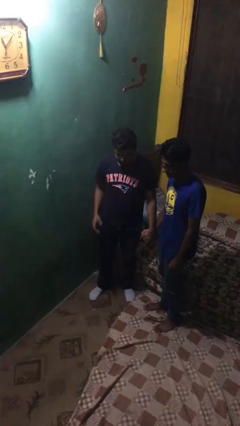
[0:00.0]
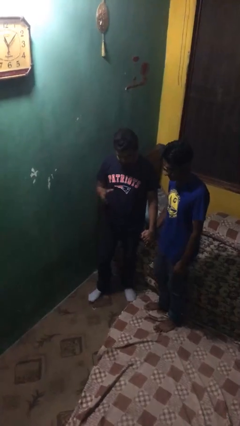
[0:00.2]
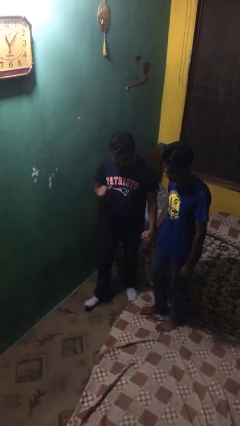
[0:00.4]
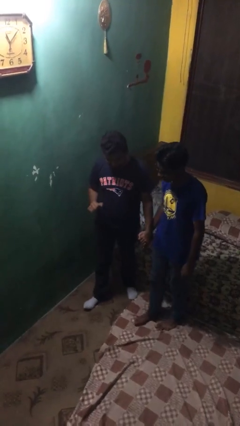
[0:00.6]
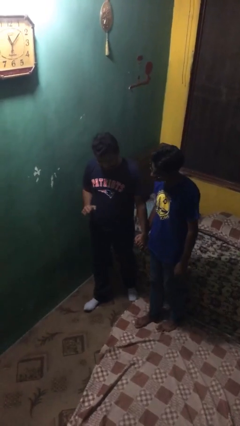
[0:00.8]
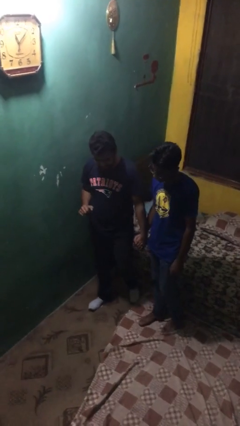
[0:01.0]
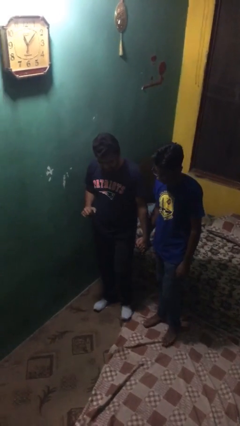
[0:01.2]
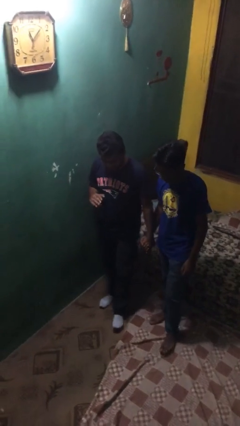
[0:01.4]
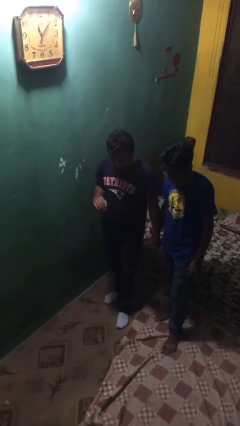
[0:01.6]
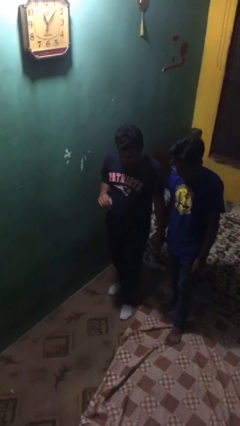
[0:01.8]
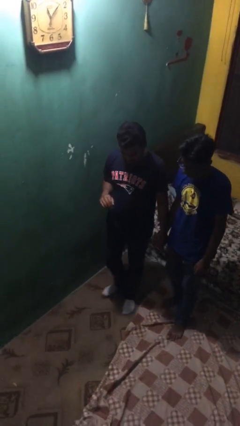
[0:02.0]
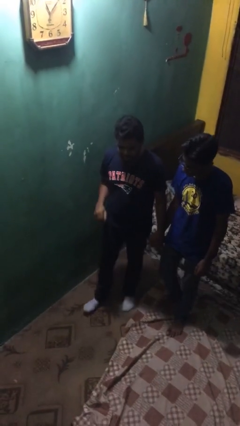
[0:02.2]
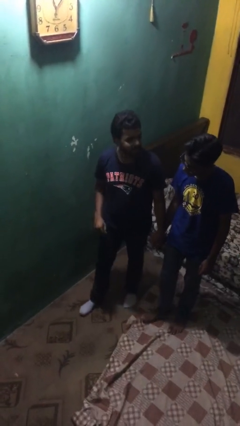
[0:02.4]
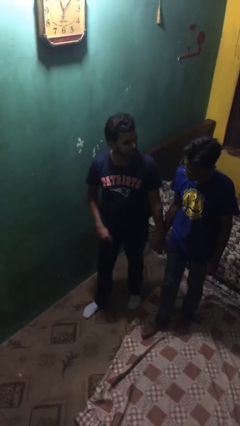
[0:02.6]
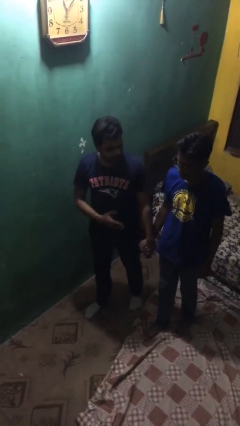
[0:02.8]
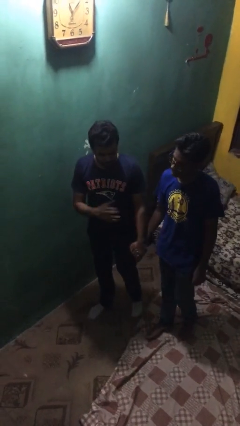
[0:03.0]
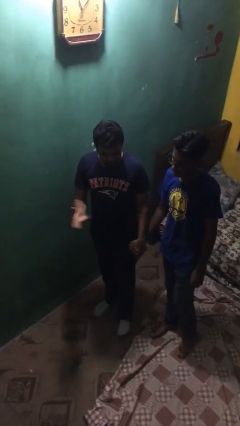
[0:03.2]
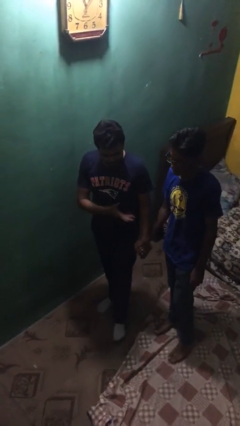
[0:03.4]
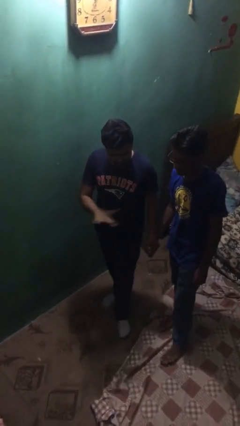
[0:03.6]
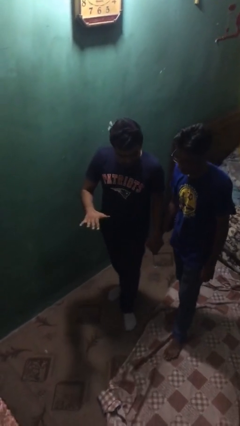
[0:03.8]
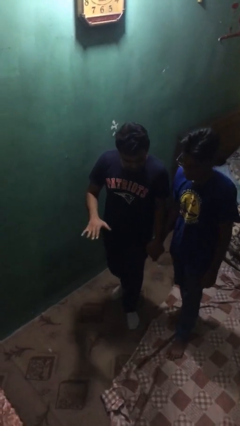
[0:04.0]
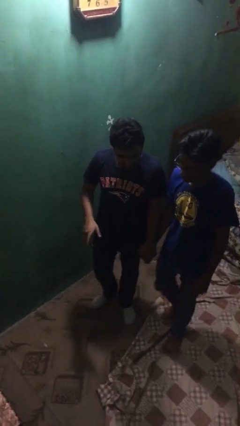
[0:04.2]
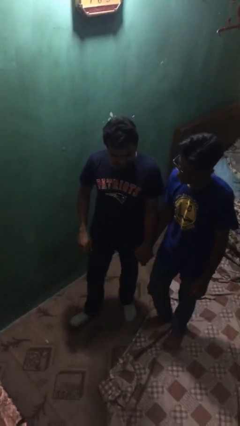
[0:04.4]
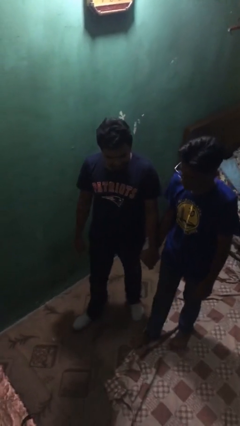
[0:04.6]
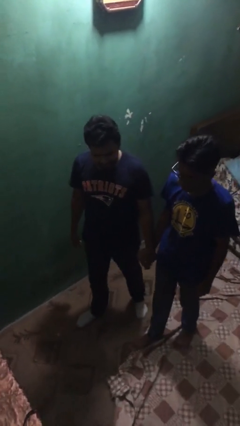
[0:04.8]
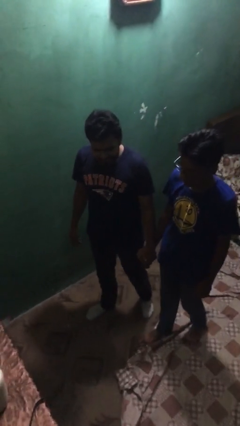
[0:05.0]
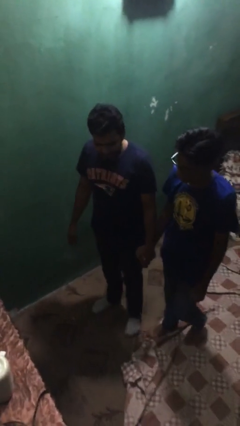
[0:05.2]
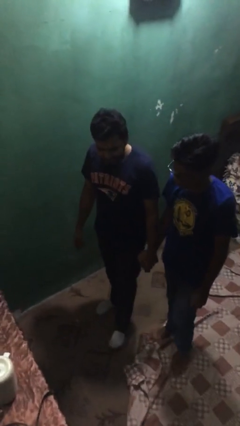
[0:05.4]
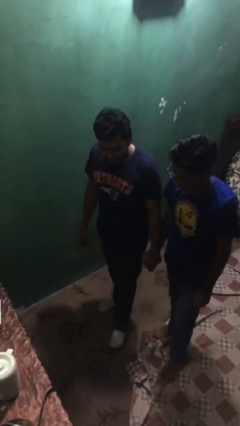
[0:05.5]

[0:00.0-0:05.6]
person holds hand

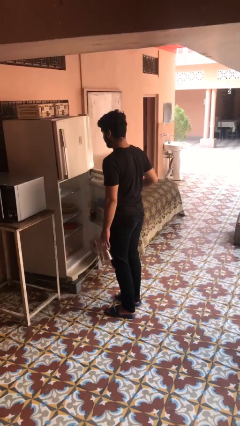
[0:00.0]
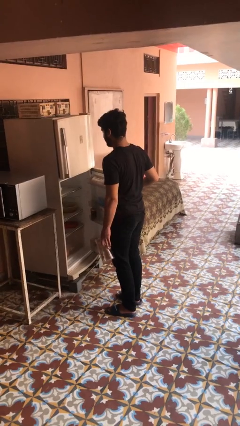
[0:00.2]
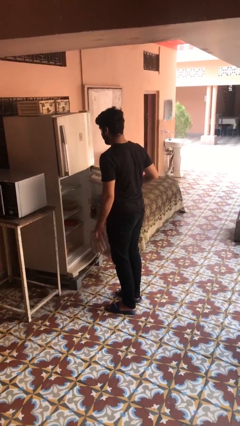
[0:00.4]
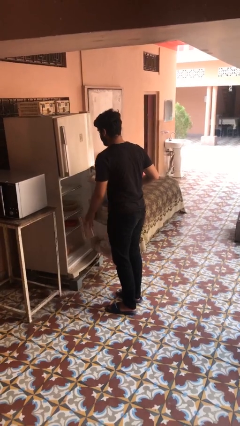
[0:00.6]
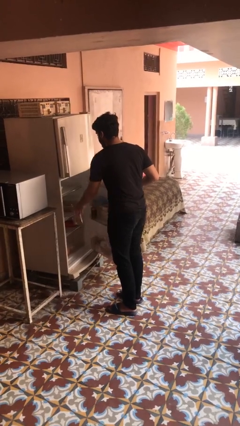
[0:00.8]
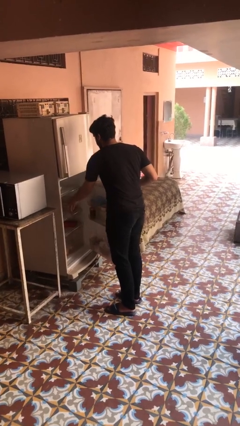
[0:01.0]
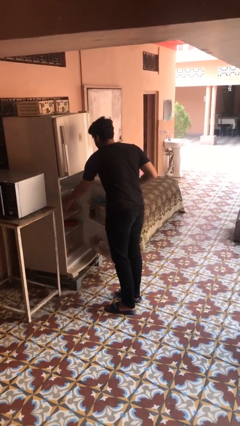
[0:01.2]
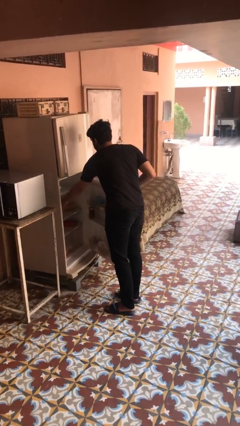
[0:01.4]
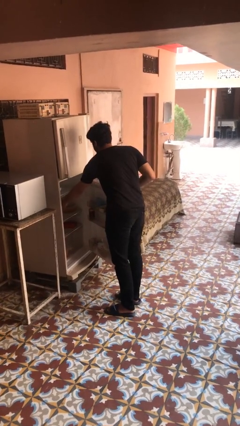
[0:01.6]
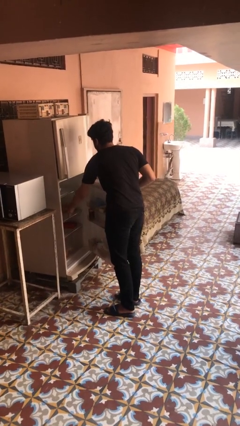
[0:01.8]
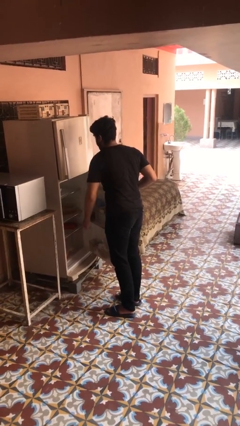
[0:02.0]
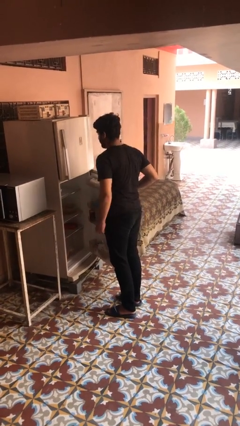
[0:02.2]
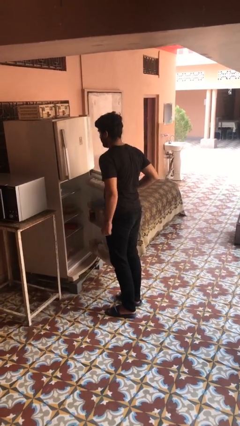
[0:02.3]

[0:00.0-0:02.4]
person puts object into refrigerator

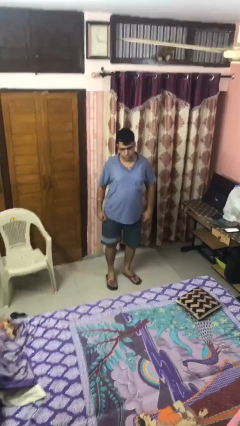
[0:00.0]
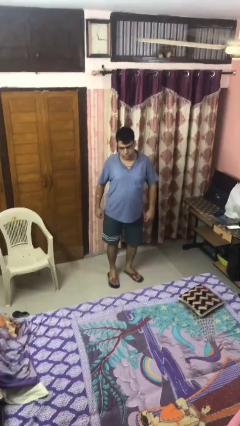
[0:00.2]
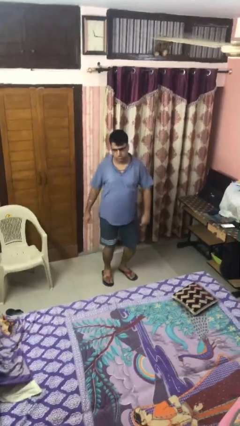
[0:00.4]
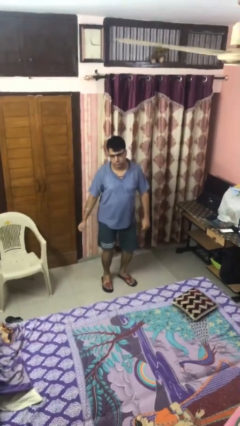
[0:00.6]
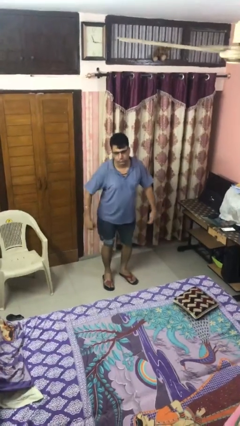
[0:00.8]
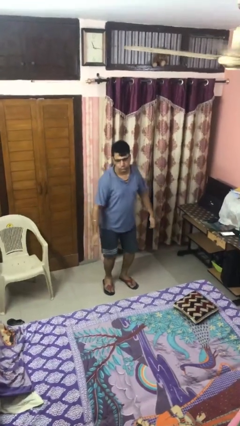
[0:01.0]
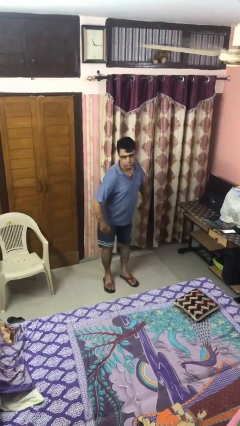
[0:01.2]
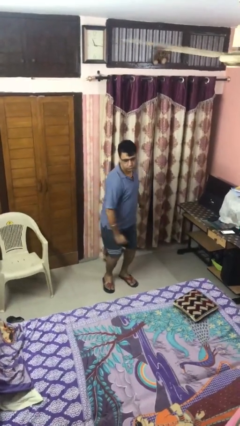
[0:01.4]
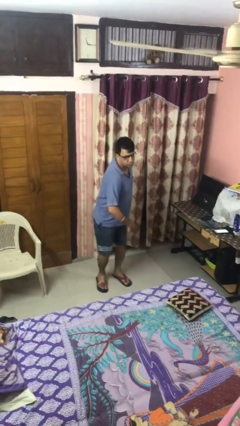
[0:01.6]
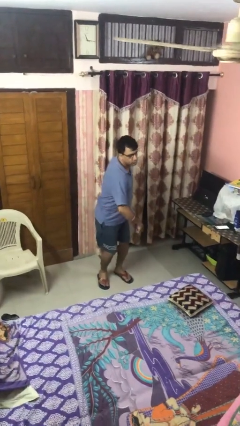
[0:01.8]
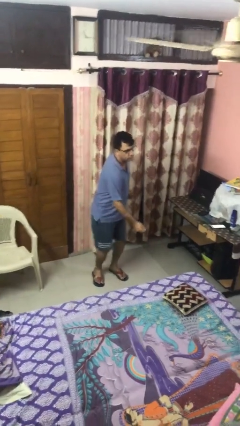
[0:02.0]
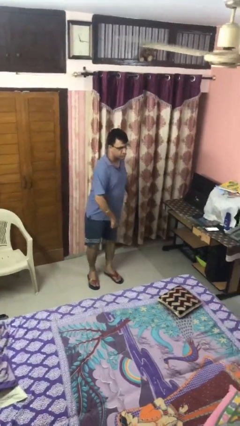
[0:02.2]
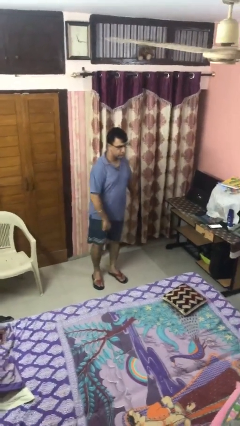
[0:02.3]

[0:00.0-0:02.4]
person dances in place

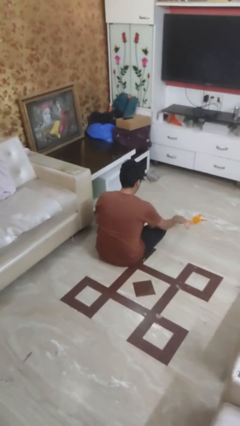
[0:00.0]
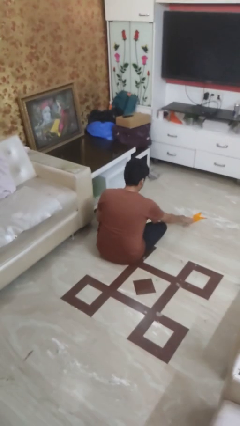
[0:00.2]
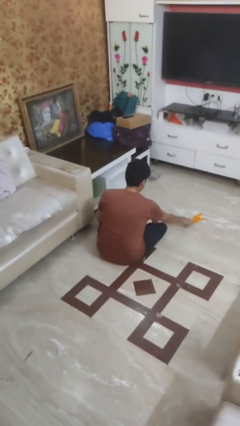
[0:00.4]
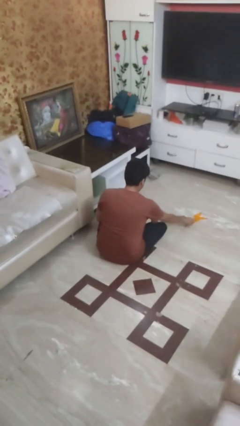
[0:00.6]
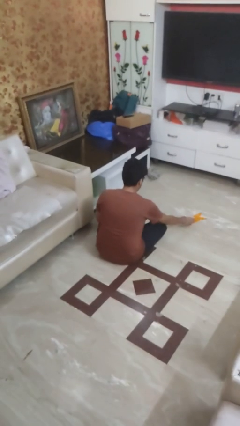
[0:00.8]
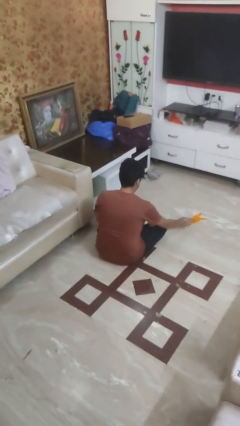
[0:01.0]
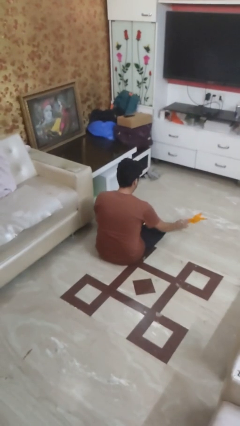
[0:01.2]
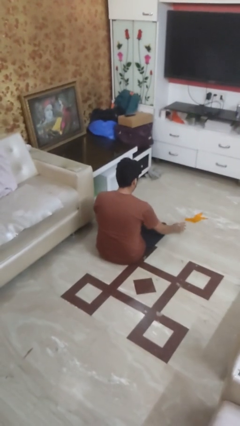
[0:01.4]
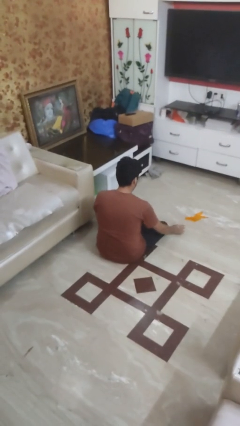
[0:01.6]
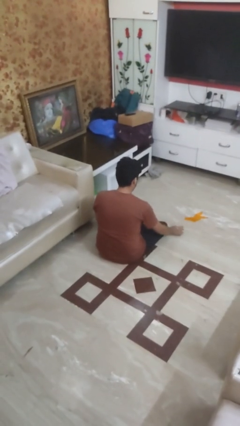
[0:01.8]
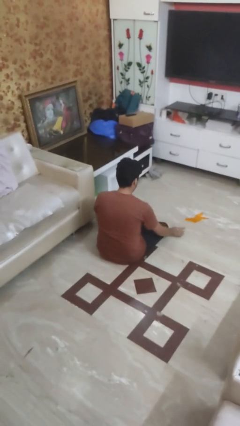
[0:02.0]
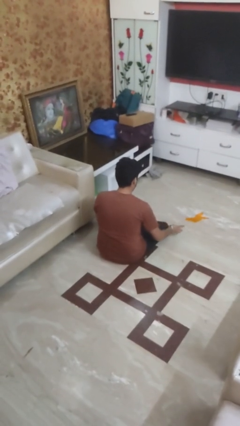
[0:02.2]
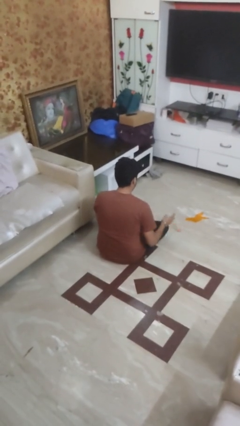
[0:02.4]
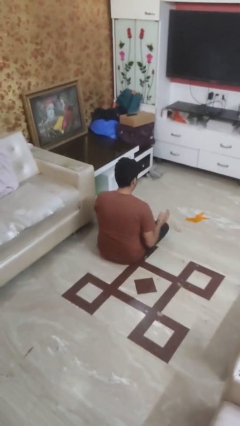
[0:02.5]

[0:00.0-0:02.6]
person sets upright glass

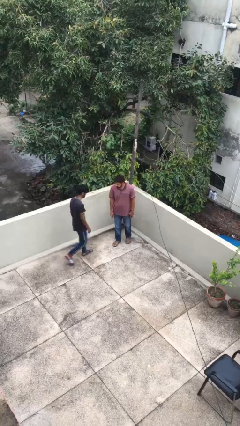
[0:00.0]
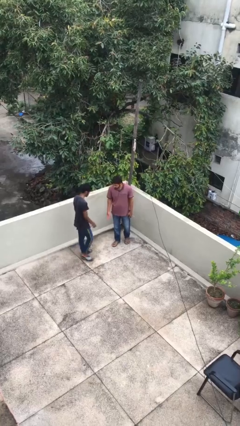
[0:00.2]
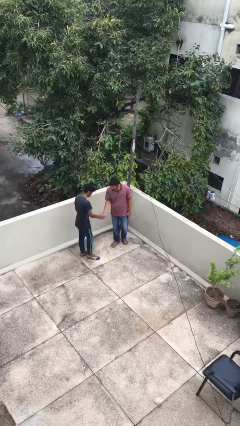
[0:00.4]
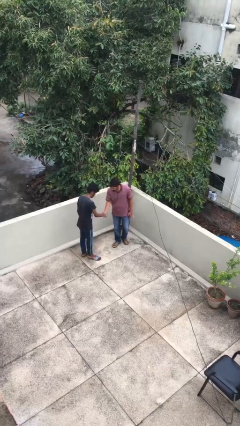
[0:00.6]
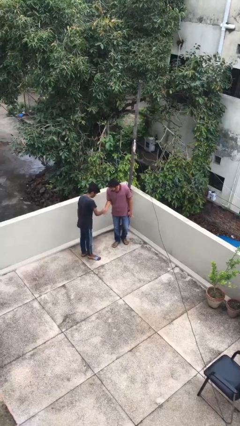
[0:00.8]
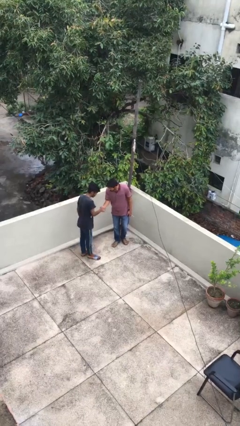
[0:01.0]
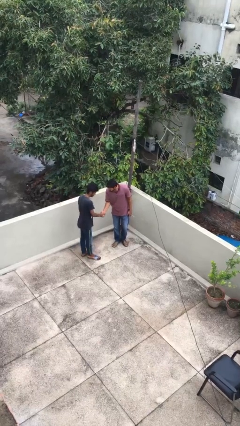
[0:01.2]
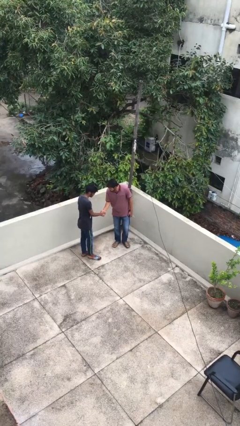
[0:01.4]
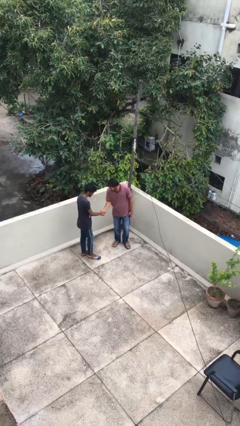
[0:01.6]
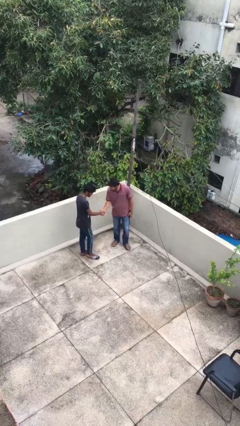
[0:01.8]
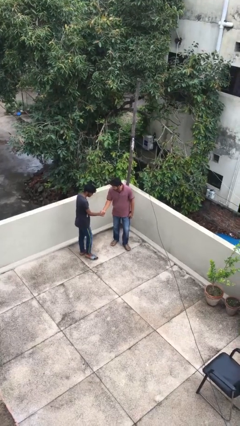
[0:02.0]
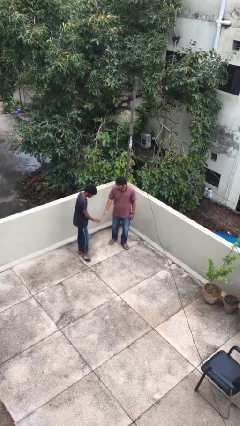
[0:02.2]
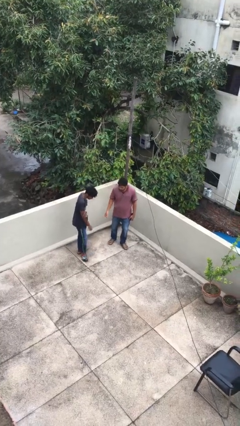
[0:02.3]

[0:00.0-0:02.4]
person shakes hand

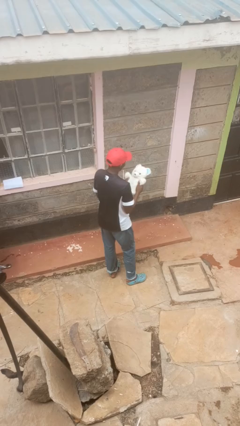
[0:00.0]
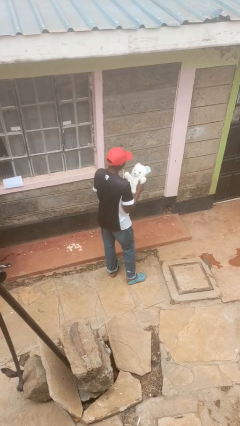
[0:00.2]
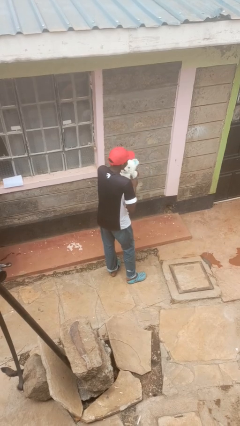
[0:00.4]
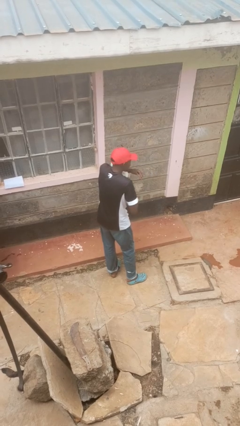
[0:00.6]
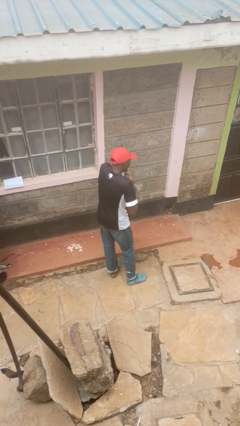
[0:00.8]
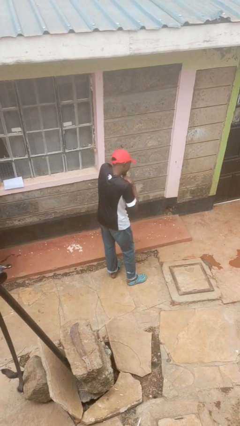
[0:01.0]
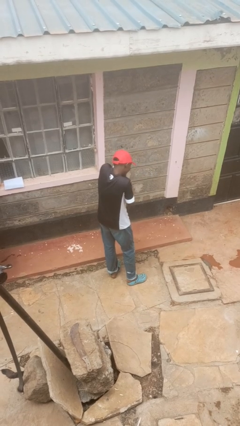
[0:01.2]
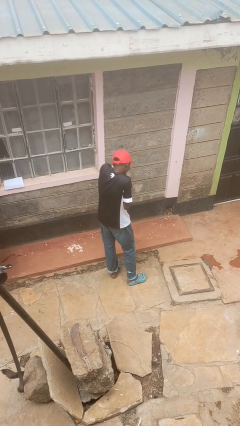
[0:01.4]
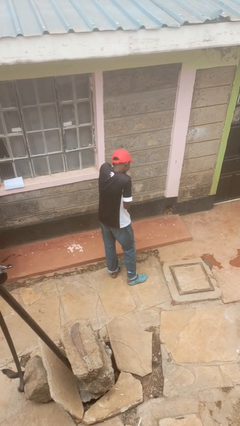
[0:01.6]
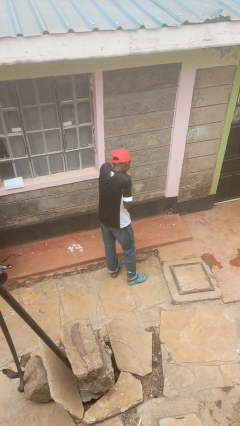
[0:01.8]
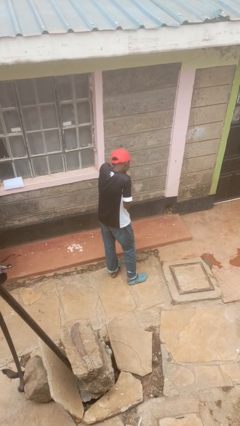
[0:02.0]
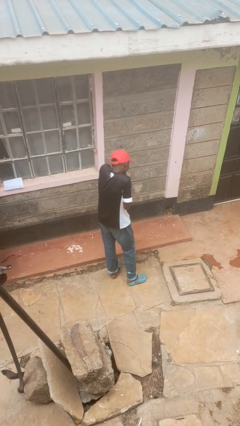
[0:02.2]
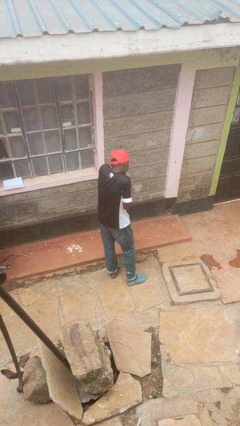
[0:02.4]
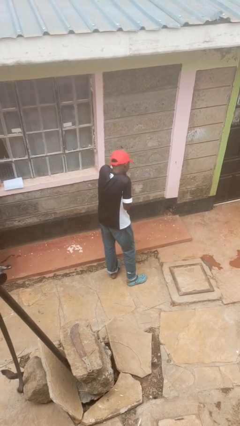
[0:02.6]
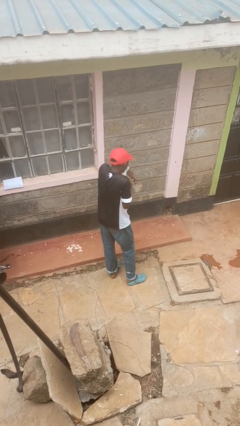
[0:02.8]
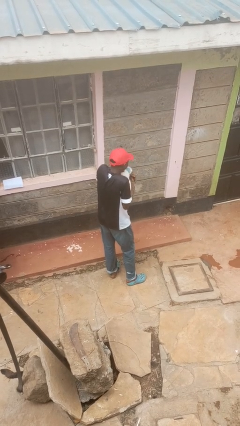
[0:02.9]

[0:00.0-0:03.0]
person hugs stuffed animal
